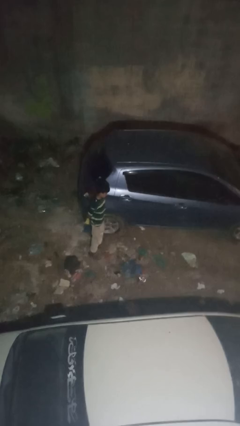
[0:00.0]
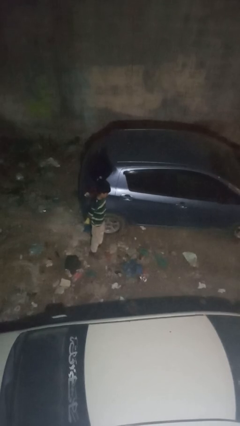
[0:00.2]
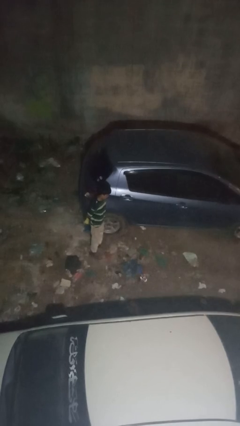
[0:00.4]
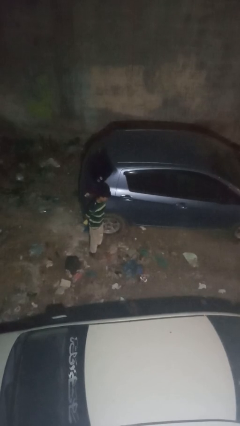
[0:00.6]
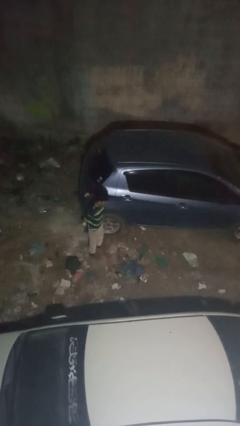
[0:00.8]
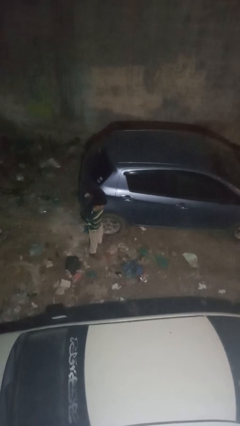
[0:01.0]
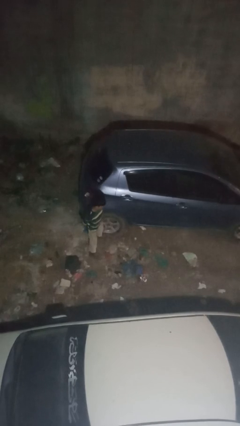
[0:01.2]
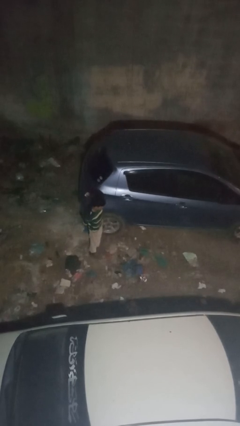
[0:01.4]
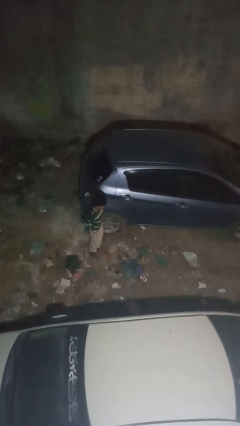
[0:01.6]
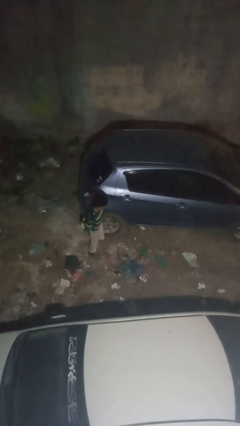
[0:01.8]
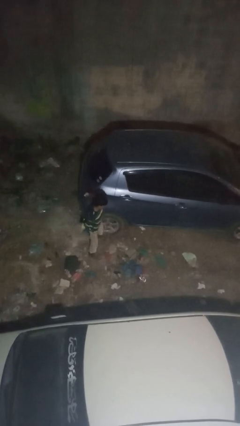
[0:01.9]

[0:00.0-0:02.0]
person kicks car tires

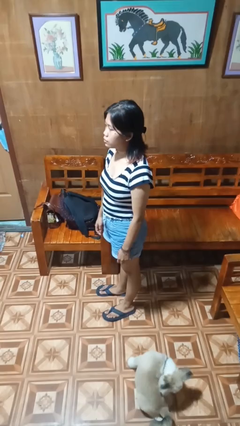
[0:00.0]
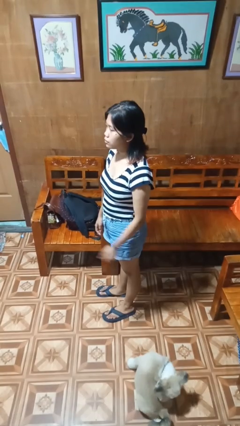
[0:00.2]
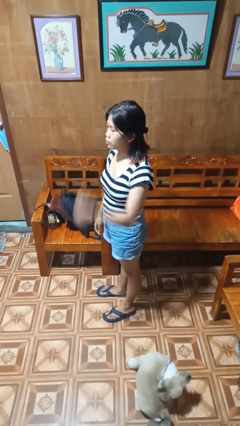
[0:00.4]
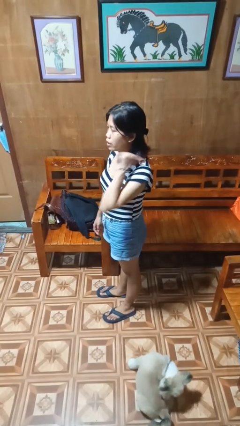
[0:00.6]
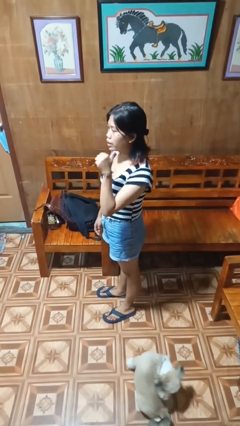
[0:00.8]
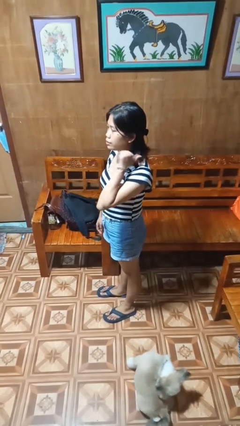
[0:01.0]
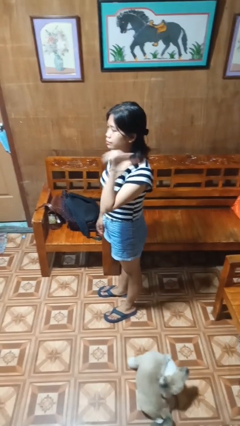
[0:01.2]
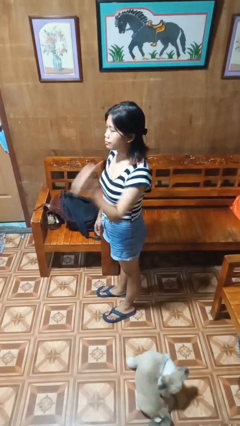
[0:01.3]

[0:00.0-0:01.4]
person gestures behind me

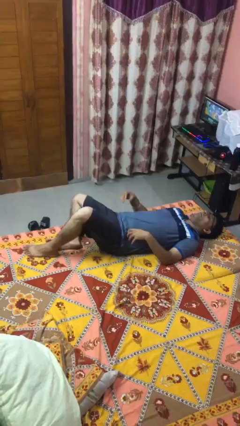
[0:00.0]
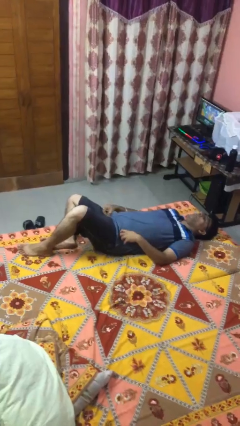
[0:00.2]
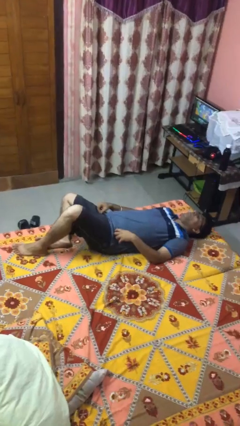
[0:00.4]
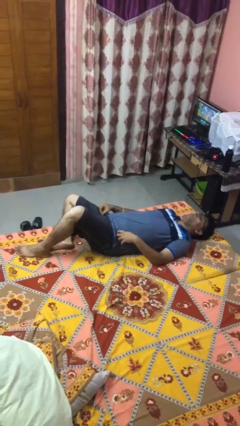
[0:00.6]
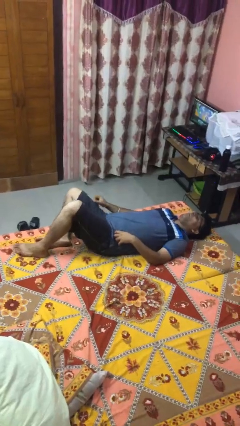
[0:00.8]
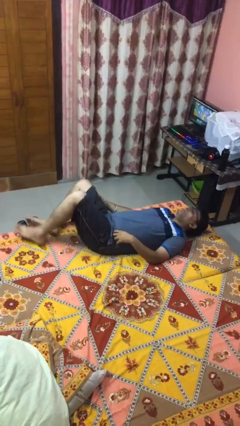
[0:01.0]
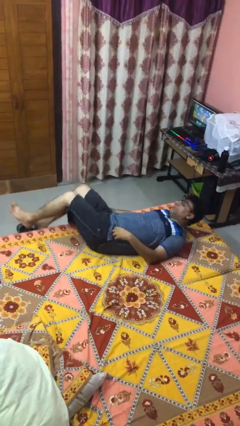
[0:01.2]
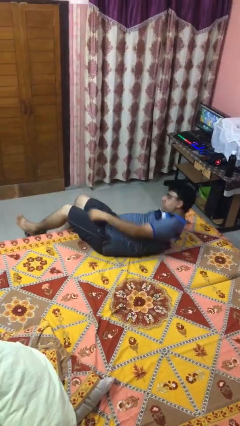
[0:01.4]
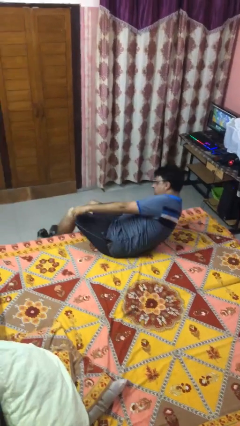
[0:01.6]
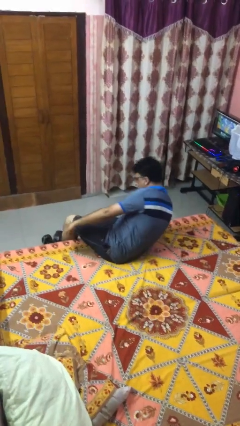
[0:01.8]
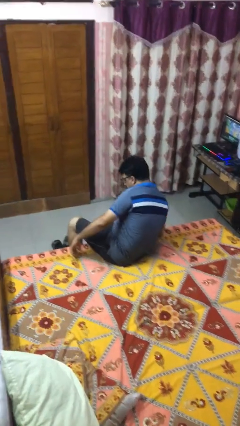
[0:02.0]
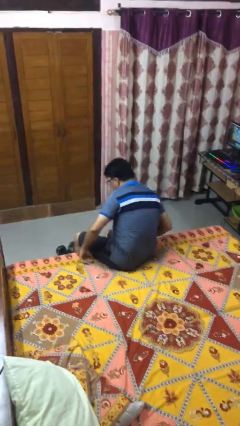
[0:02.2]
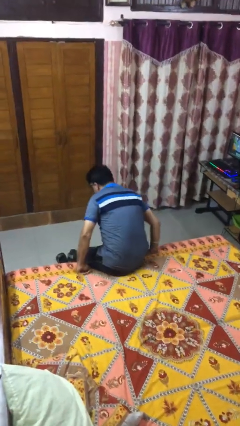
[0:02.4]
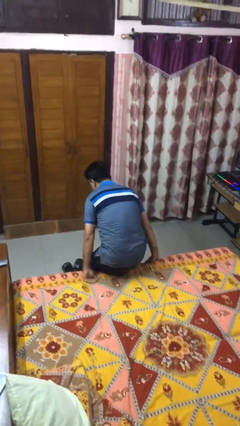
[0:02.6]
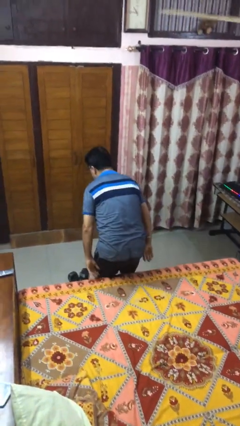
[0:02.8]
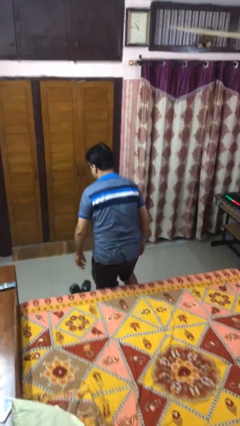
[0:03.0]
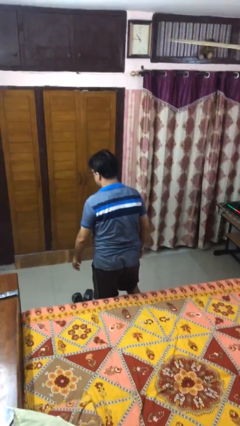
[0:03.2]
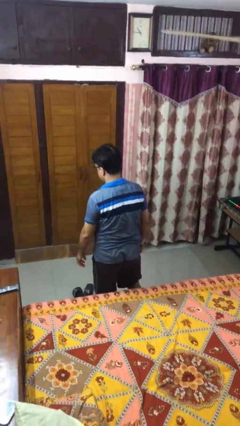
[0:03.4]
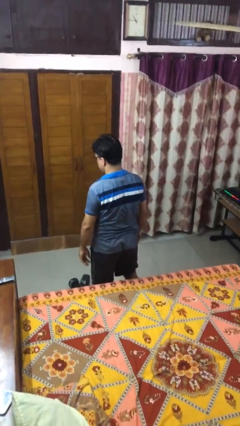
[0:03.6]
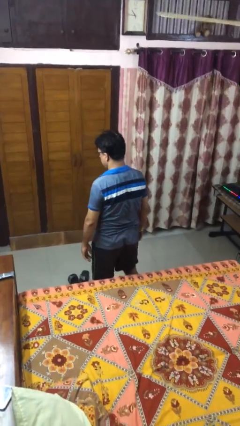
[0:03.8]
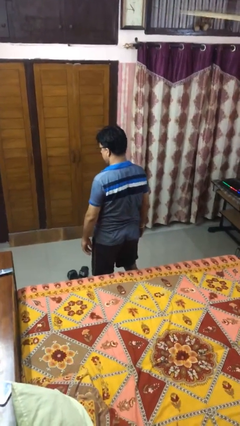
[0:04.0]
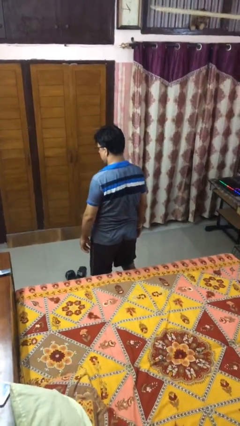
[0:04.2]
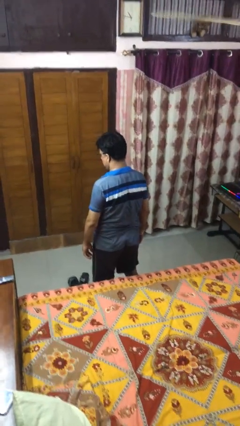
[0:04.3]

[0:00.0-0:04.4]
person stands up

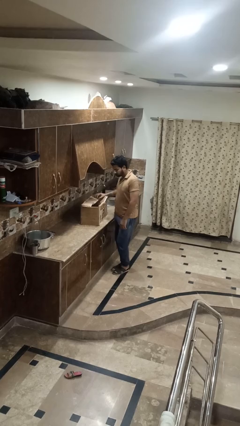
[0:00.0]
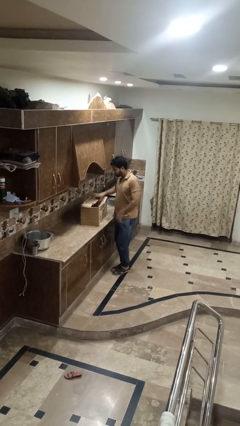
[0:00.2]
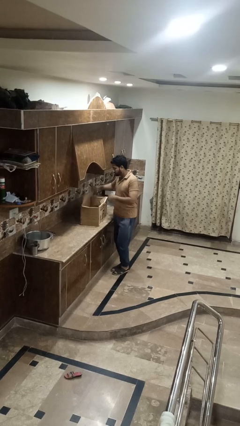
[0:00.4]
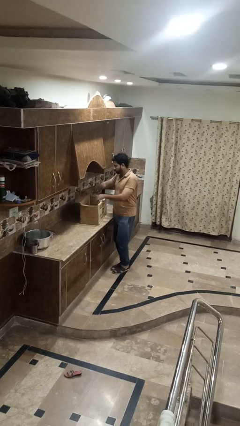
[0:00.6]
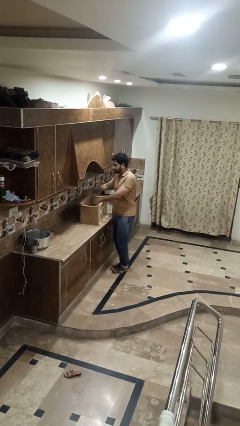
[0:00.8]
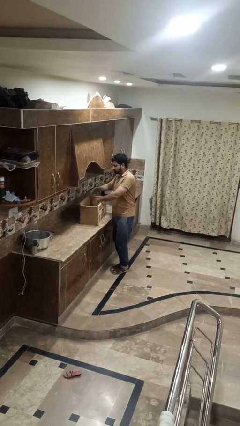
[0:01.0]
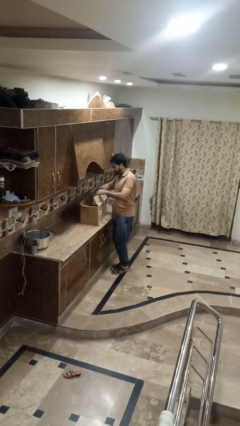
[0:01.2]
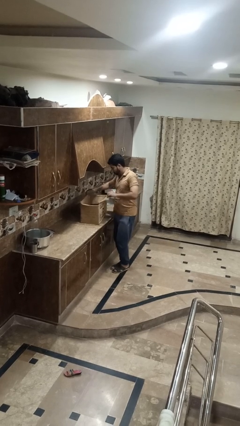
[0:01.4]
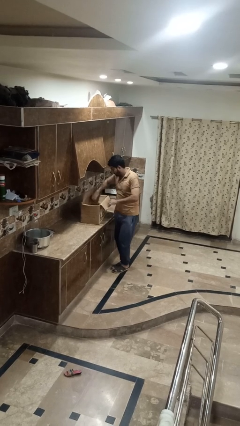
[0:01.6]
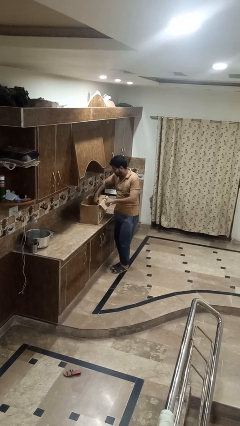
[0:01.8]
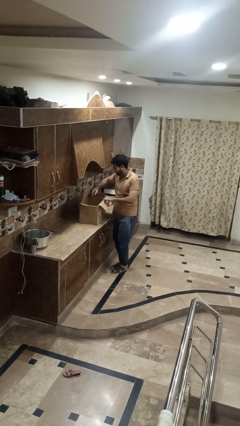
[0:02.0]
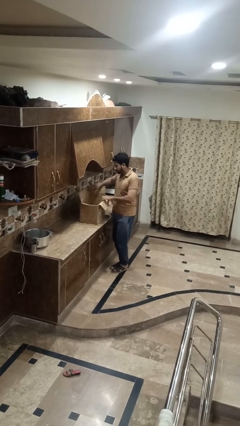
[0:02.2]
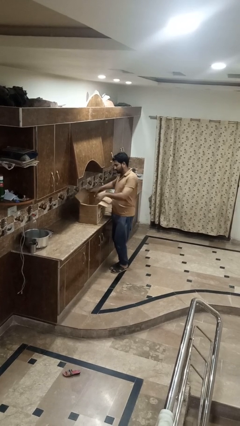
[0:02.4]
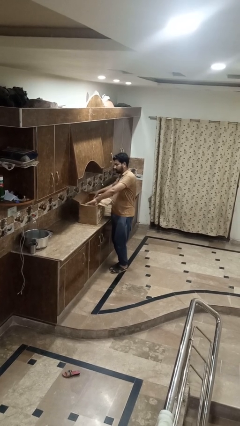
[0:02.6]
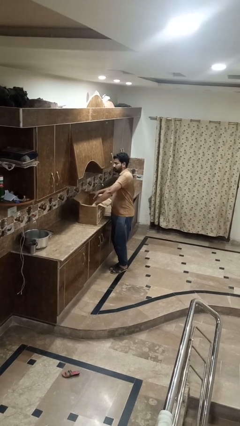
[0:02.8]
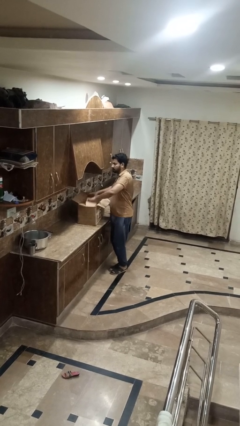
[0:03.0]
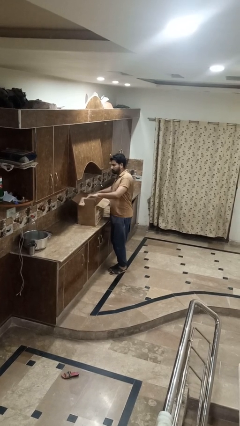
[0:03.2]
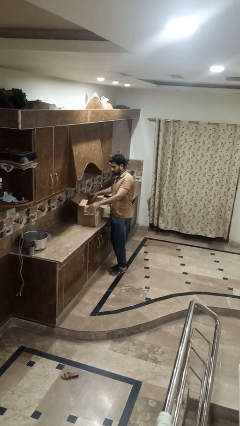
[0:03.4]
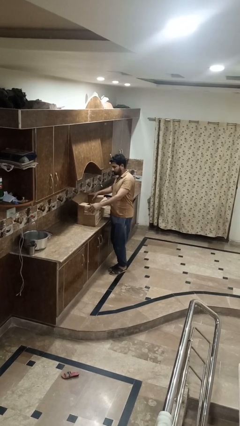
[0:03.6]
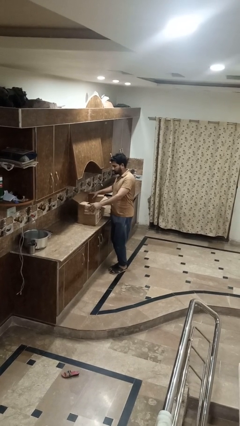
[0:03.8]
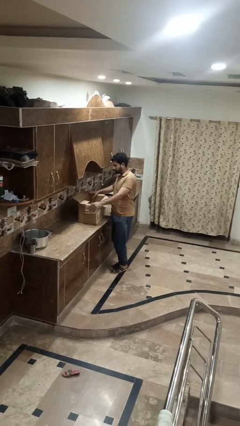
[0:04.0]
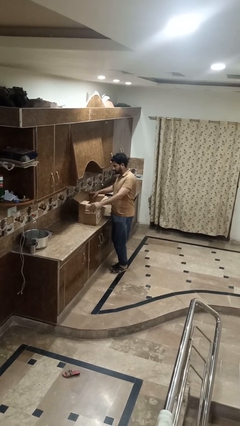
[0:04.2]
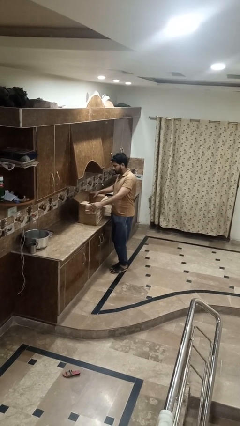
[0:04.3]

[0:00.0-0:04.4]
person opens box
